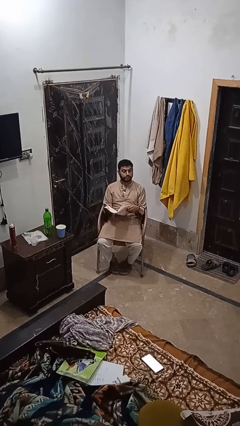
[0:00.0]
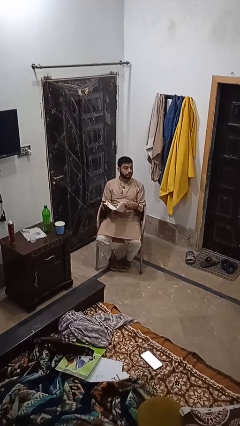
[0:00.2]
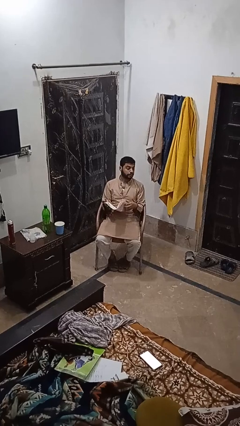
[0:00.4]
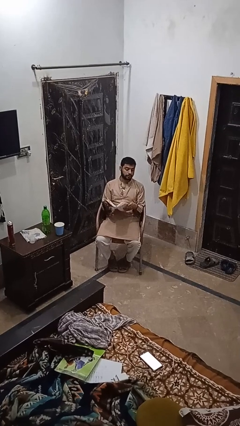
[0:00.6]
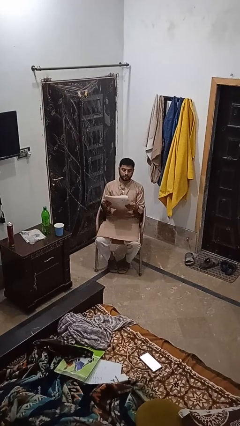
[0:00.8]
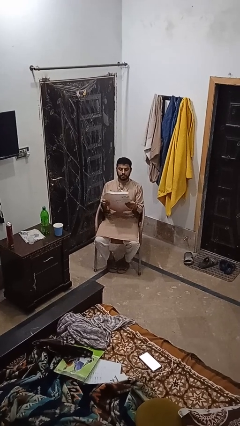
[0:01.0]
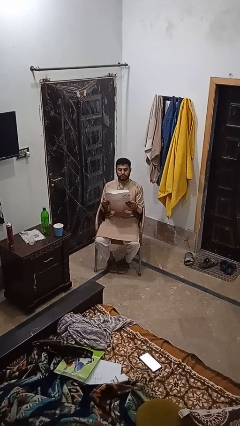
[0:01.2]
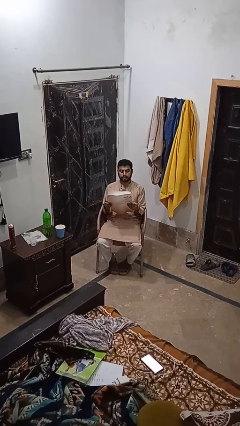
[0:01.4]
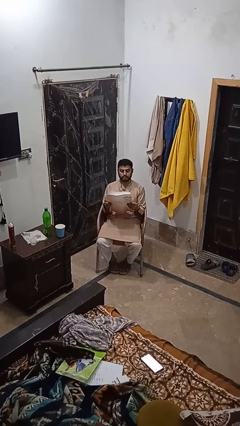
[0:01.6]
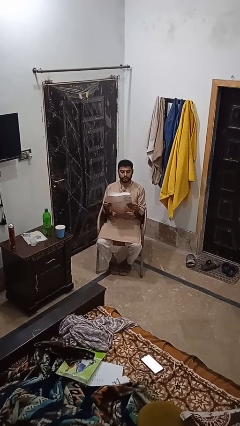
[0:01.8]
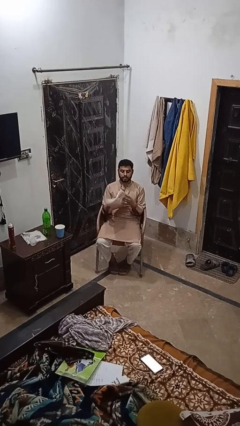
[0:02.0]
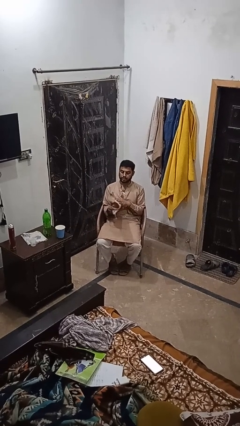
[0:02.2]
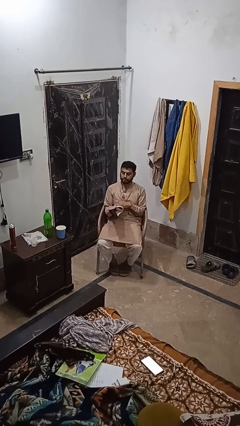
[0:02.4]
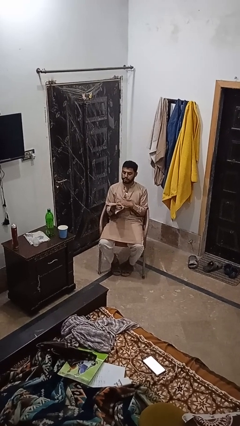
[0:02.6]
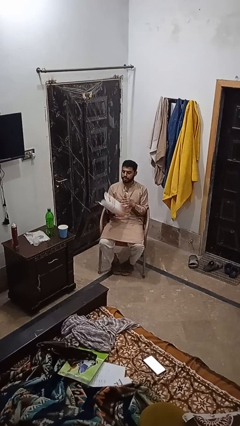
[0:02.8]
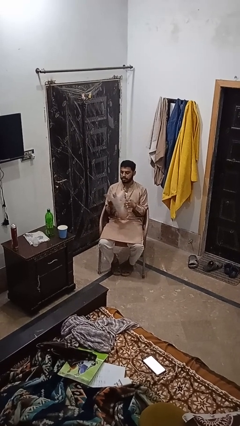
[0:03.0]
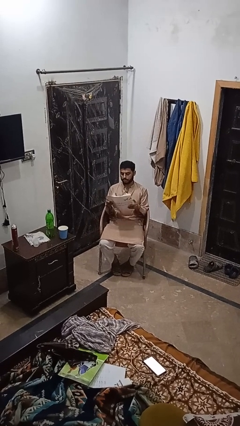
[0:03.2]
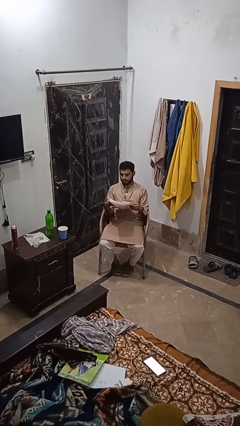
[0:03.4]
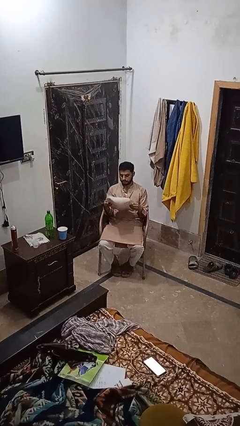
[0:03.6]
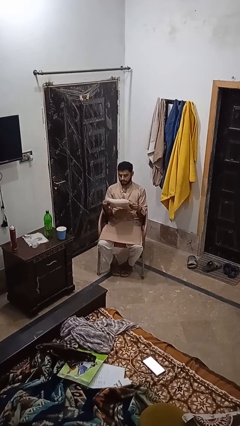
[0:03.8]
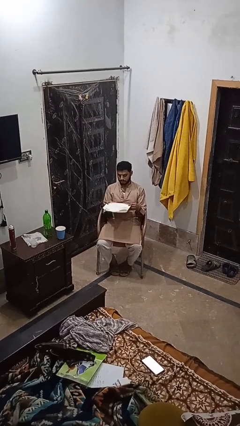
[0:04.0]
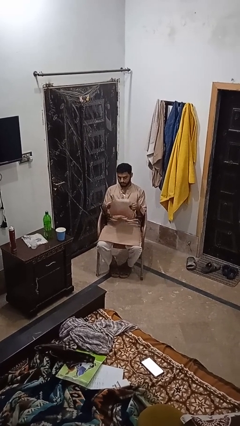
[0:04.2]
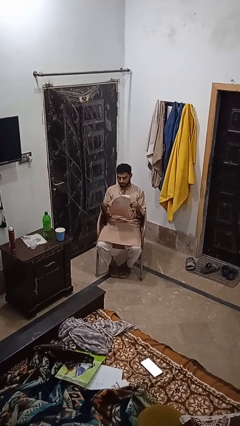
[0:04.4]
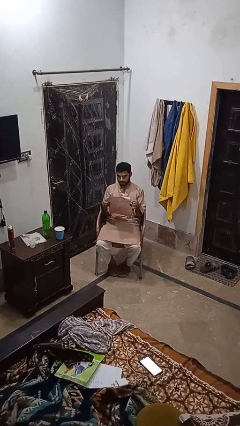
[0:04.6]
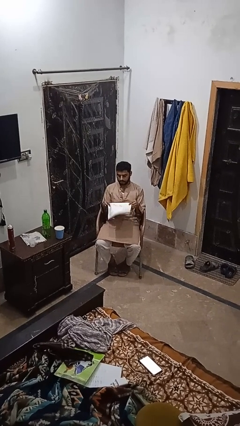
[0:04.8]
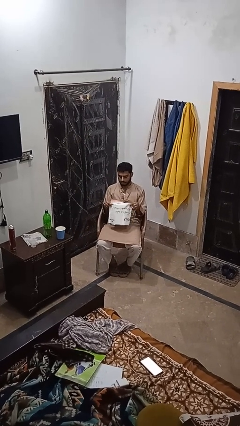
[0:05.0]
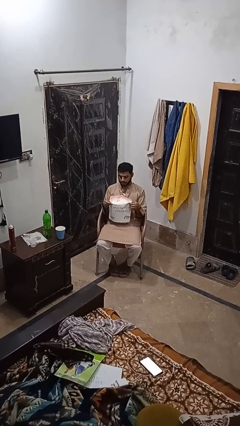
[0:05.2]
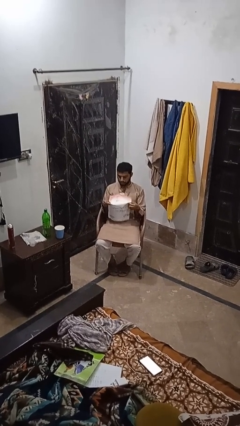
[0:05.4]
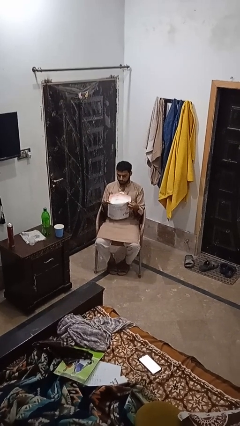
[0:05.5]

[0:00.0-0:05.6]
person reads newspaper

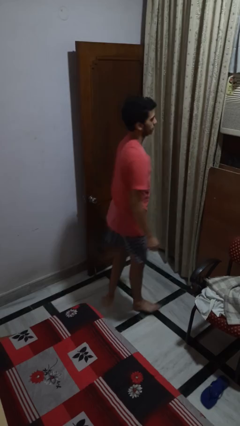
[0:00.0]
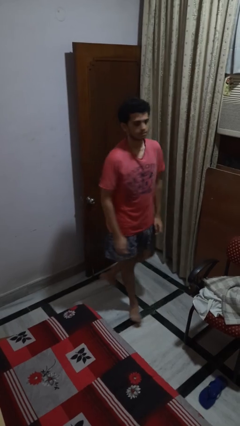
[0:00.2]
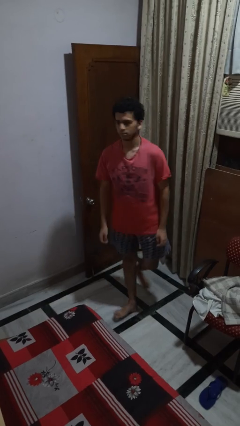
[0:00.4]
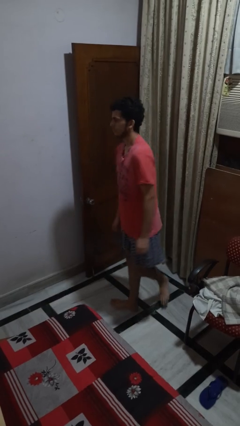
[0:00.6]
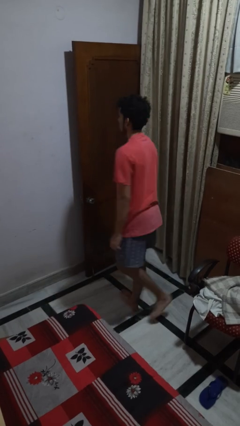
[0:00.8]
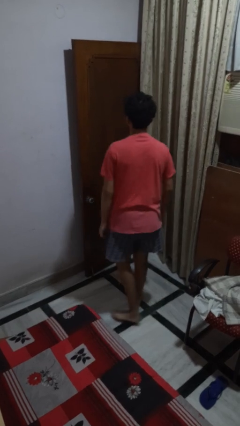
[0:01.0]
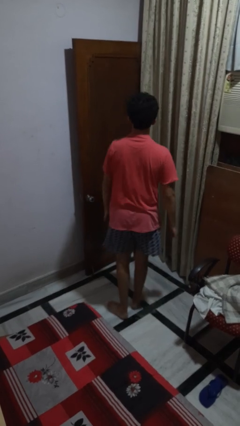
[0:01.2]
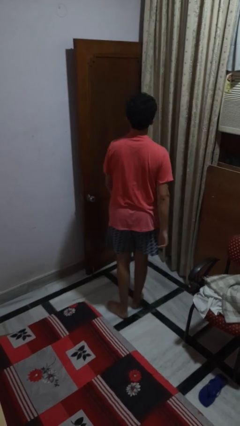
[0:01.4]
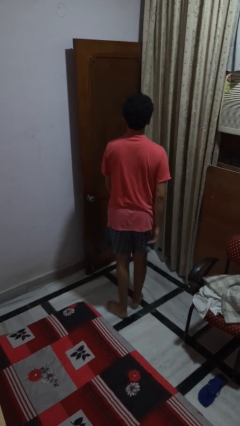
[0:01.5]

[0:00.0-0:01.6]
person twirls

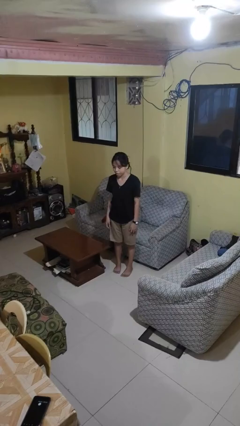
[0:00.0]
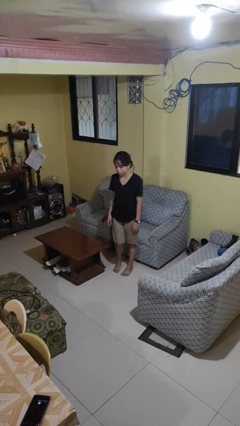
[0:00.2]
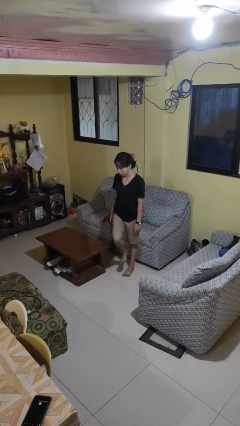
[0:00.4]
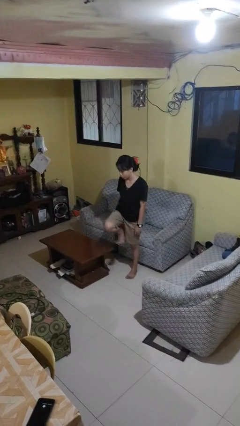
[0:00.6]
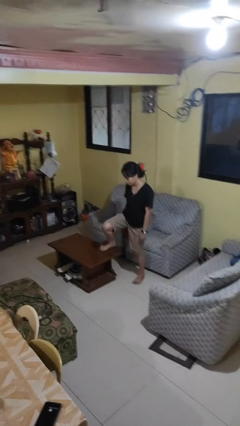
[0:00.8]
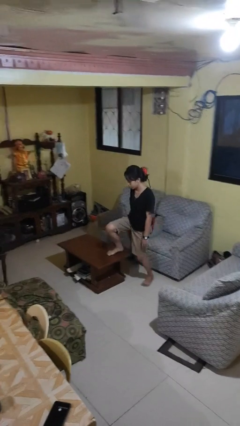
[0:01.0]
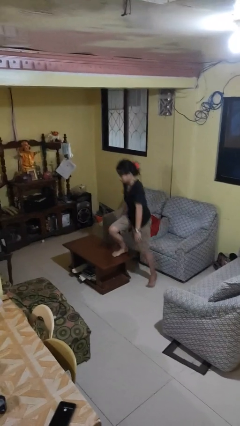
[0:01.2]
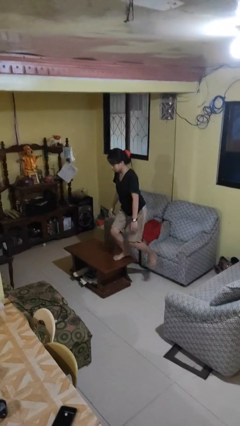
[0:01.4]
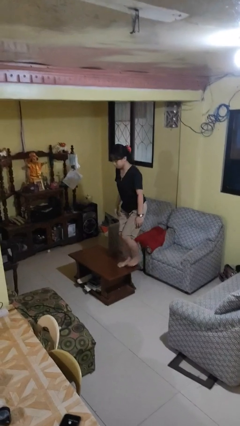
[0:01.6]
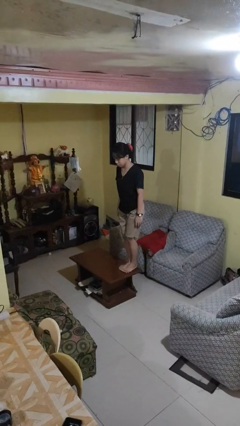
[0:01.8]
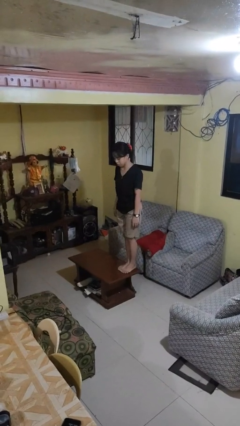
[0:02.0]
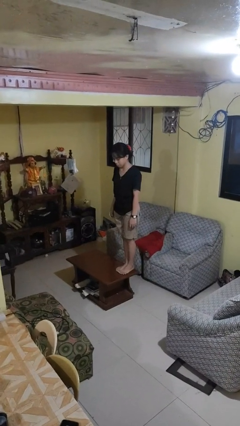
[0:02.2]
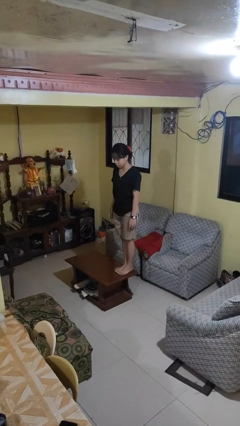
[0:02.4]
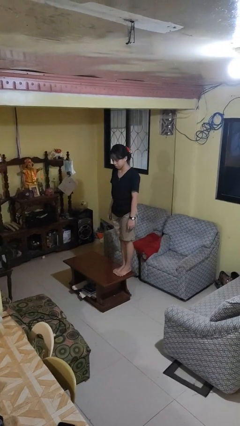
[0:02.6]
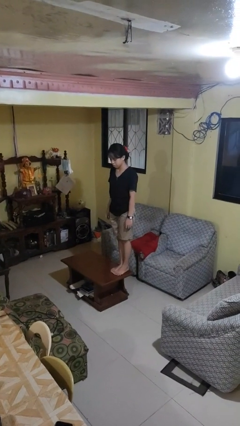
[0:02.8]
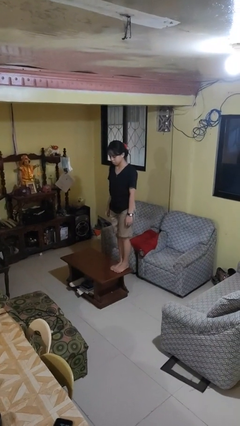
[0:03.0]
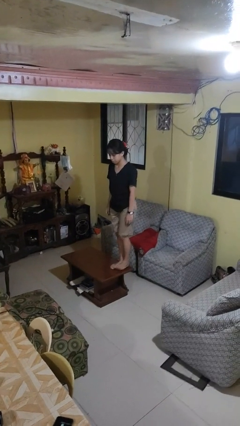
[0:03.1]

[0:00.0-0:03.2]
person climbs on table

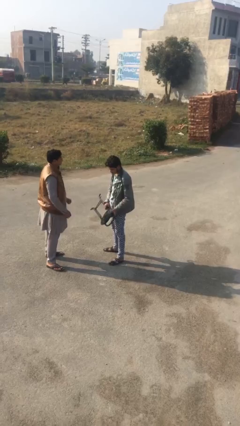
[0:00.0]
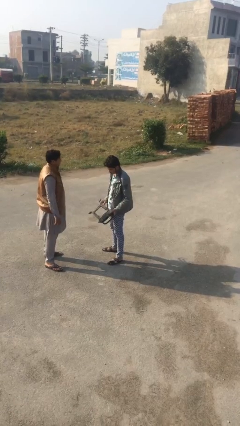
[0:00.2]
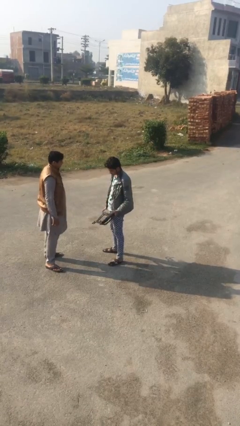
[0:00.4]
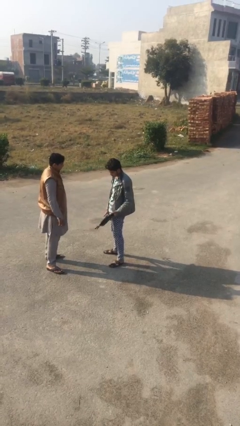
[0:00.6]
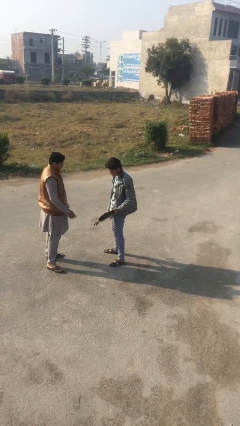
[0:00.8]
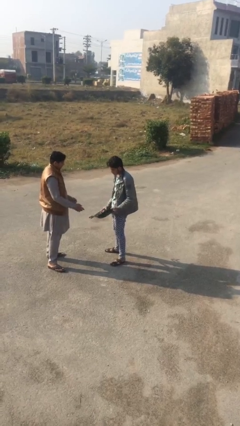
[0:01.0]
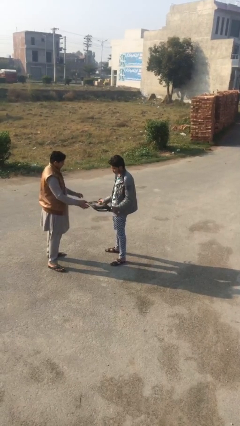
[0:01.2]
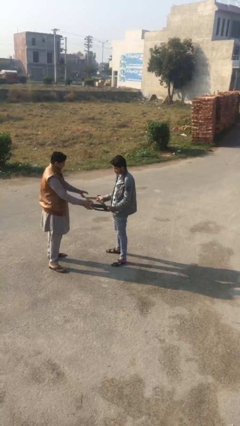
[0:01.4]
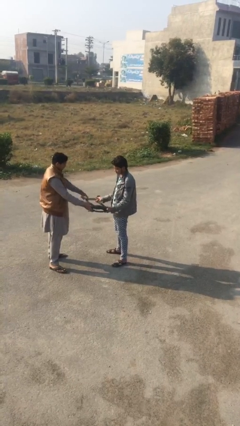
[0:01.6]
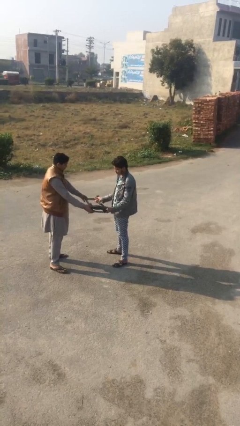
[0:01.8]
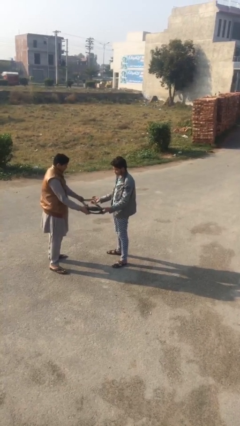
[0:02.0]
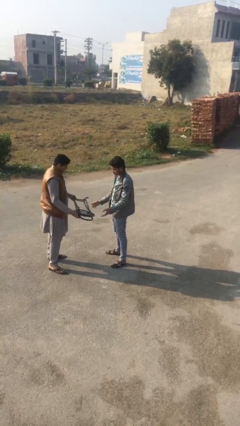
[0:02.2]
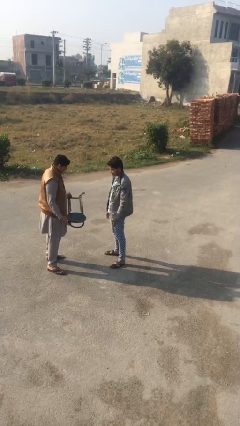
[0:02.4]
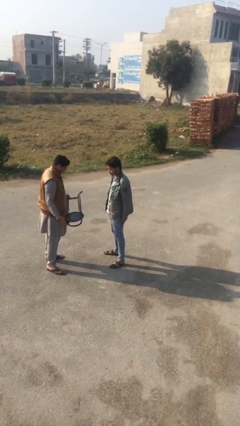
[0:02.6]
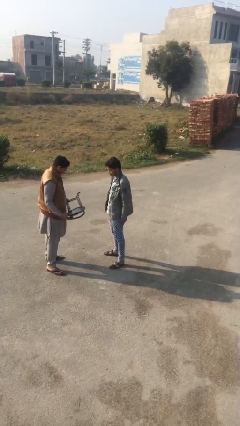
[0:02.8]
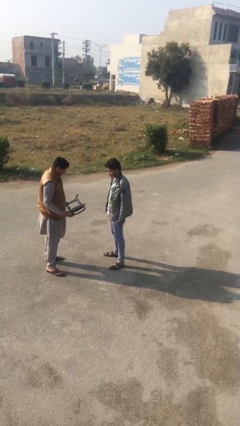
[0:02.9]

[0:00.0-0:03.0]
person transfers object to person

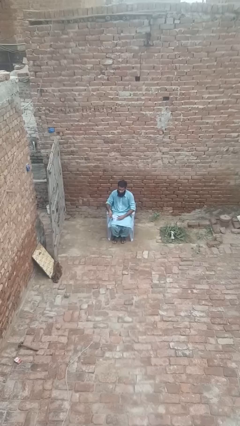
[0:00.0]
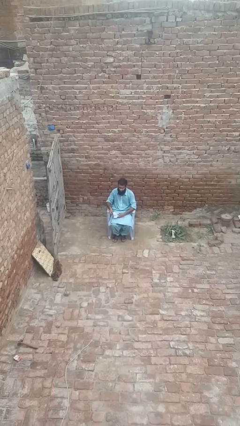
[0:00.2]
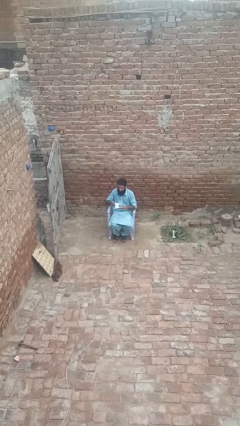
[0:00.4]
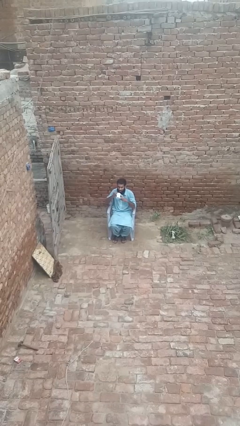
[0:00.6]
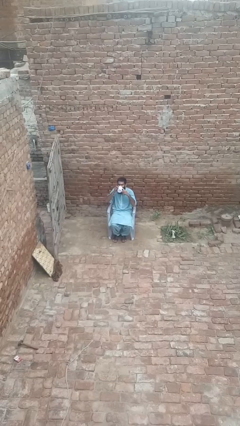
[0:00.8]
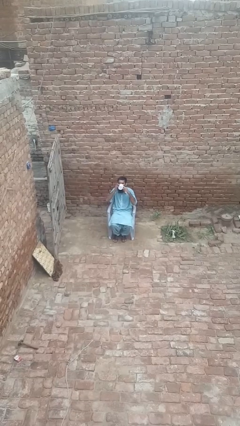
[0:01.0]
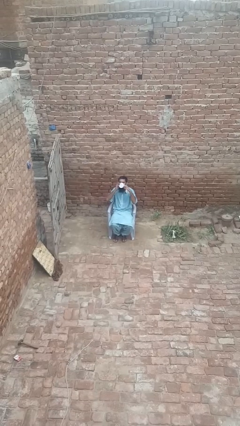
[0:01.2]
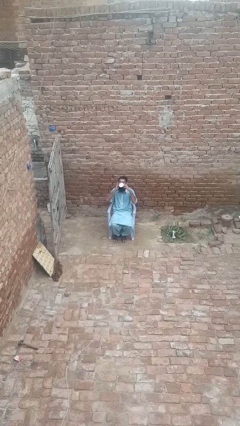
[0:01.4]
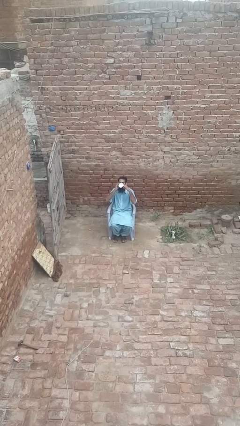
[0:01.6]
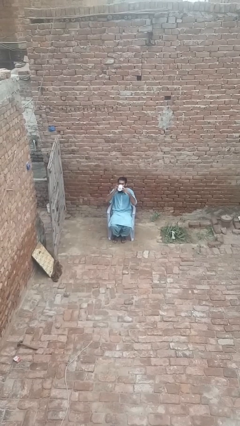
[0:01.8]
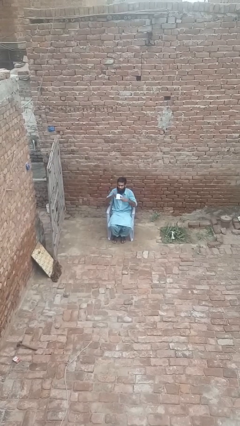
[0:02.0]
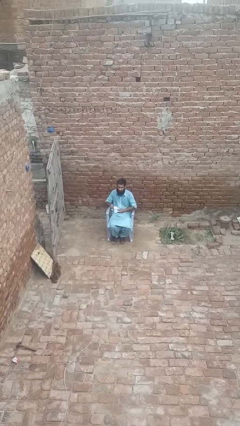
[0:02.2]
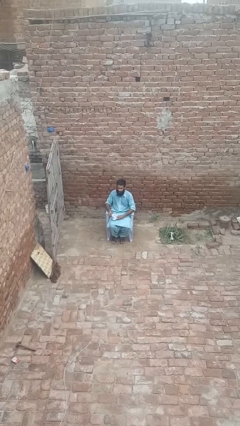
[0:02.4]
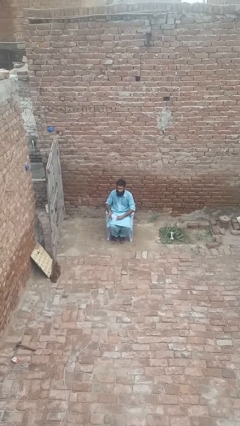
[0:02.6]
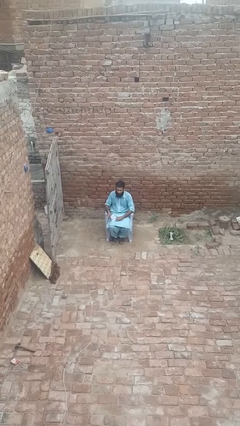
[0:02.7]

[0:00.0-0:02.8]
person drinks from mug

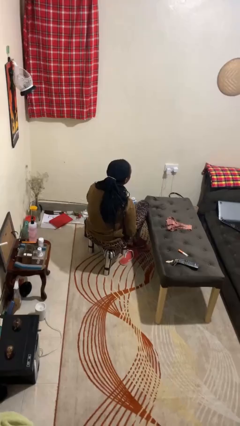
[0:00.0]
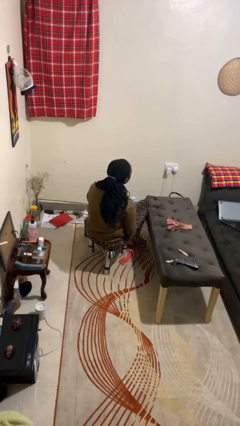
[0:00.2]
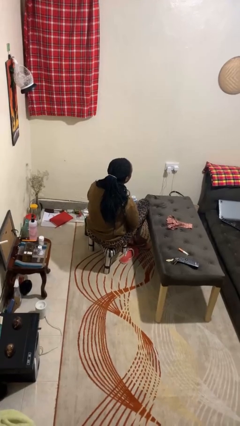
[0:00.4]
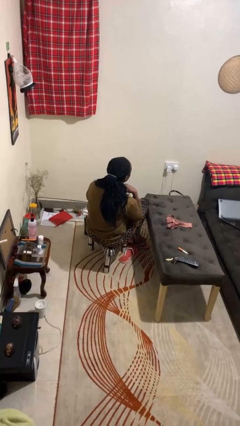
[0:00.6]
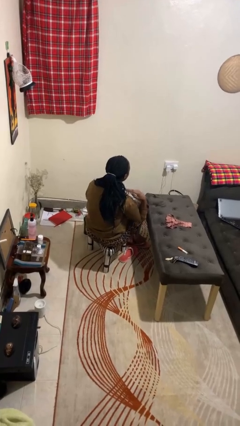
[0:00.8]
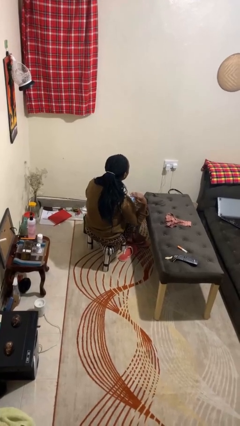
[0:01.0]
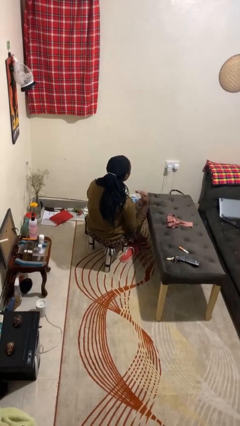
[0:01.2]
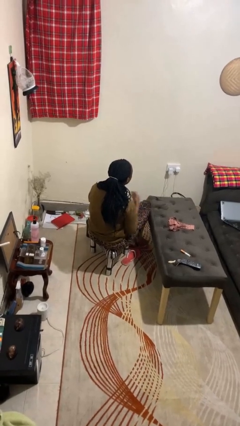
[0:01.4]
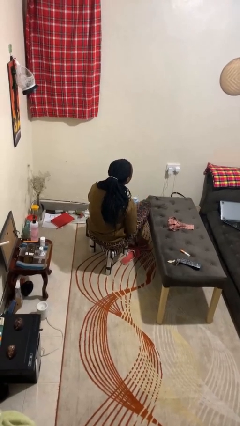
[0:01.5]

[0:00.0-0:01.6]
person gestures cut
